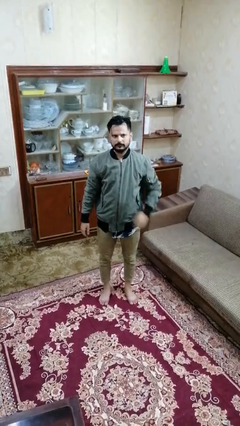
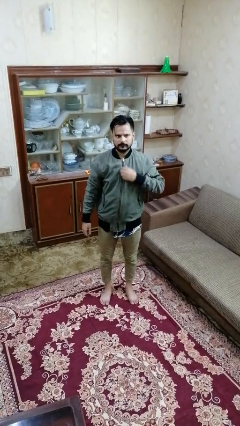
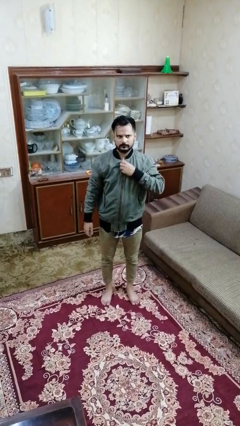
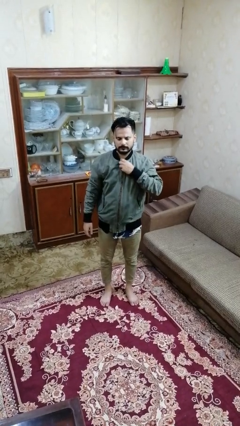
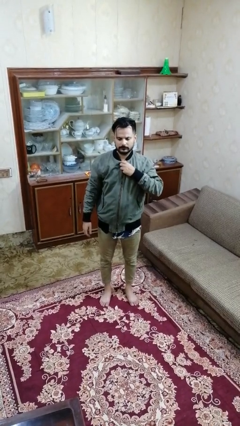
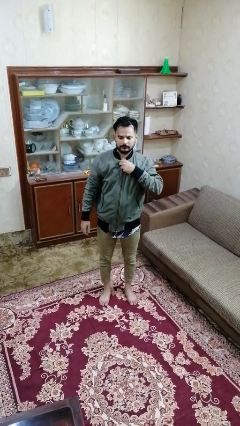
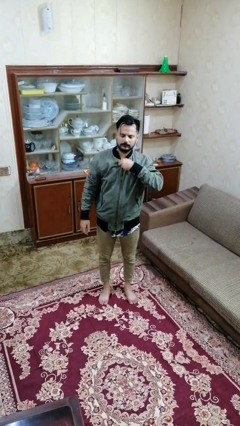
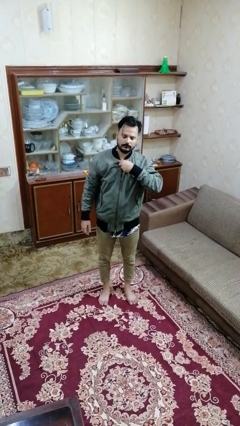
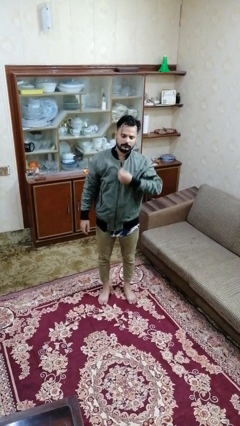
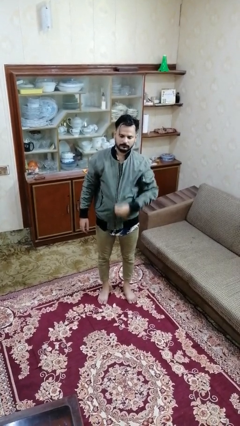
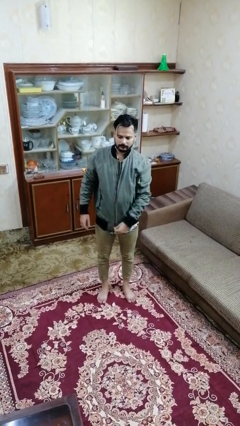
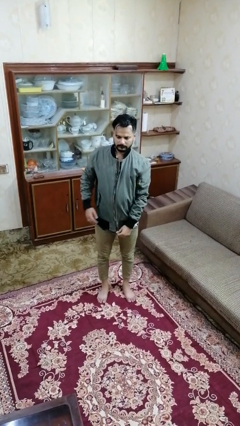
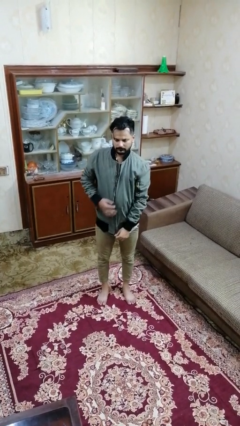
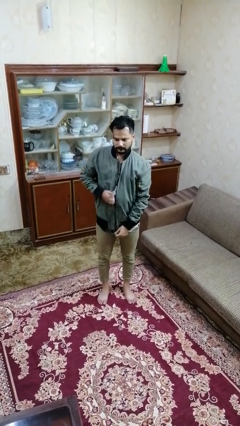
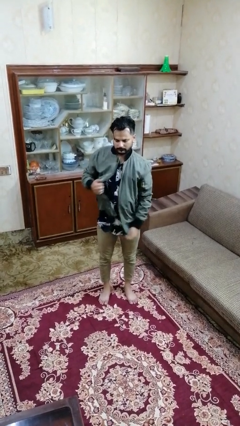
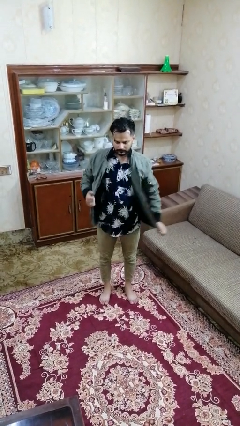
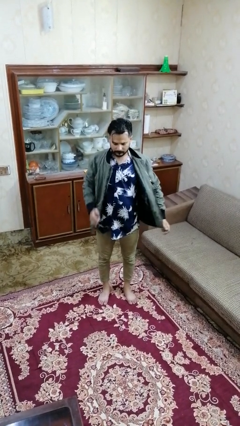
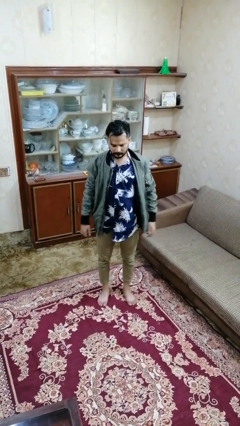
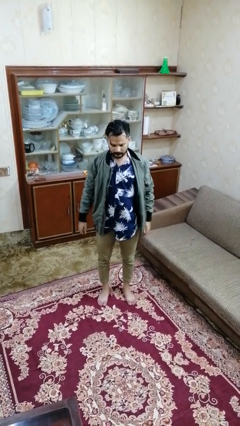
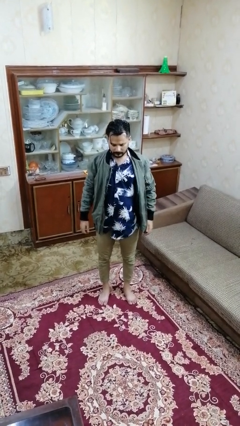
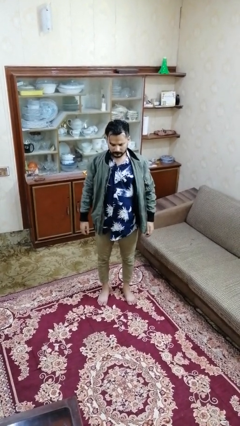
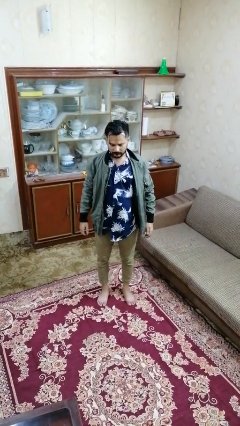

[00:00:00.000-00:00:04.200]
person unzips jacket

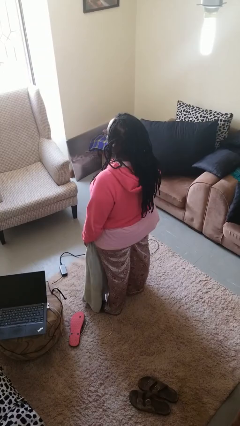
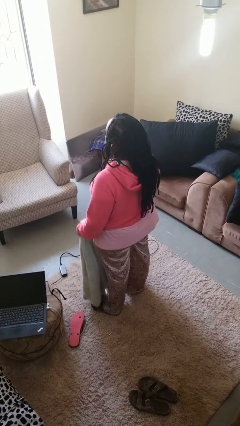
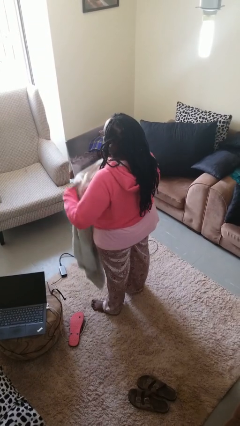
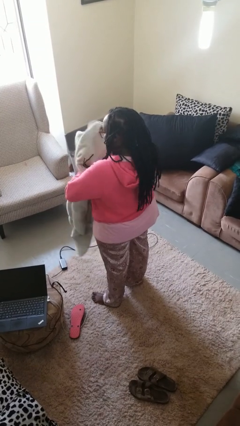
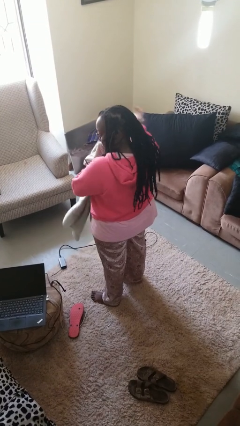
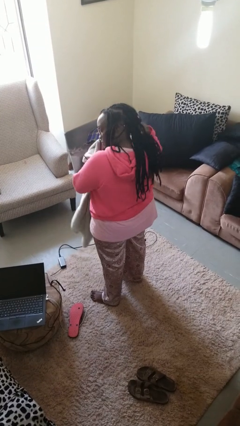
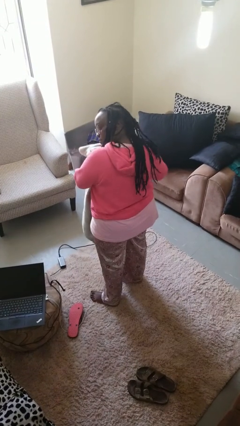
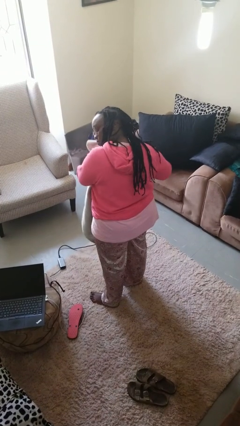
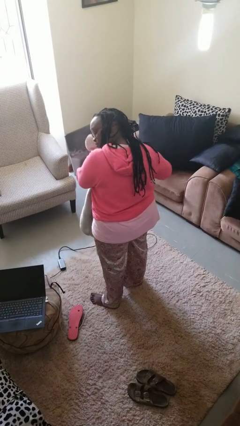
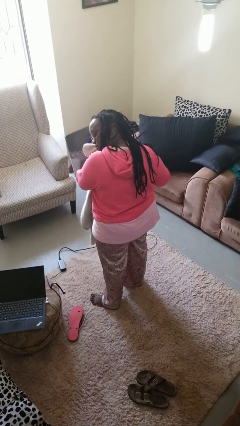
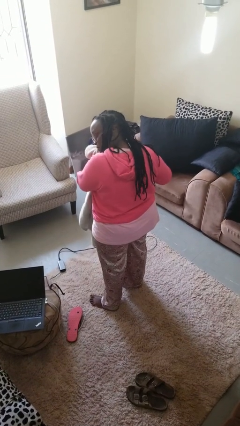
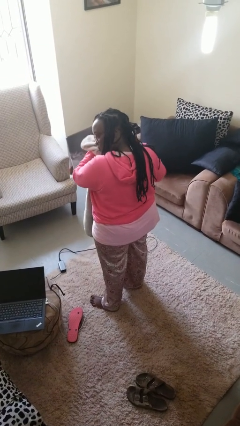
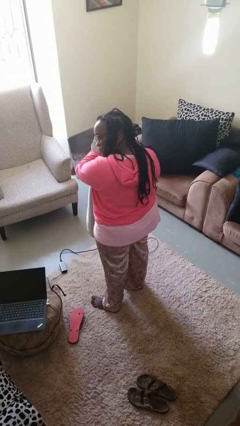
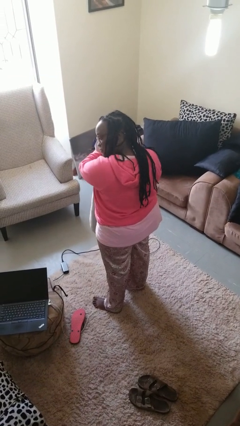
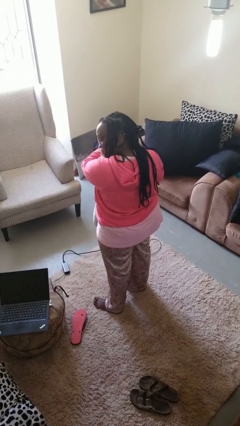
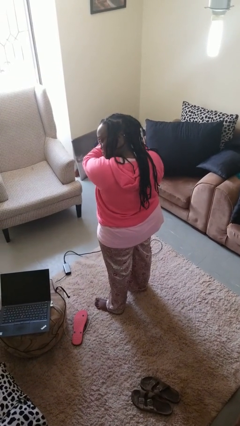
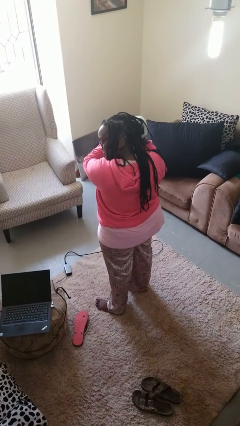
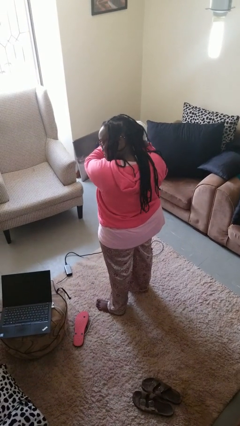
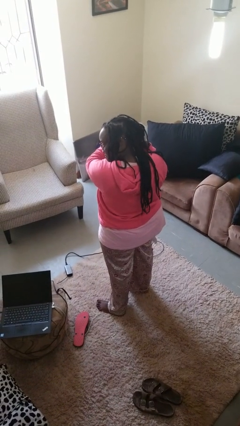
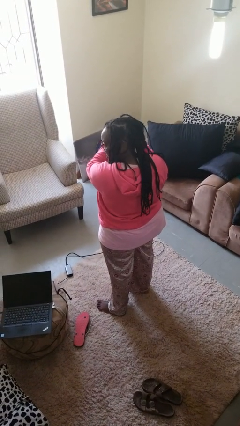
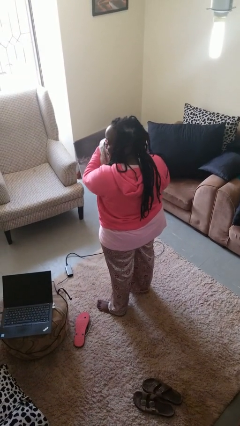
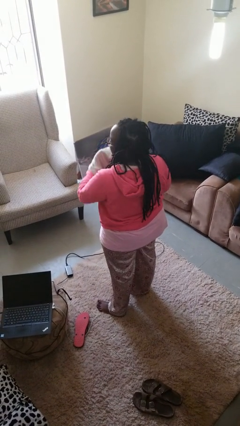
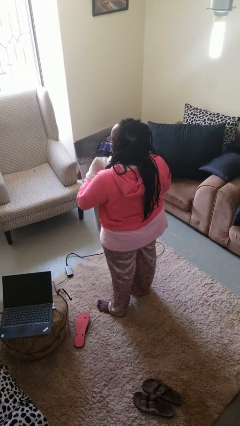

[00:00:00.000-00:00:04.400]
person dries hair with towel

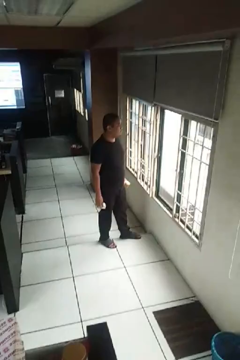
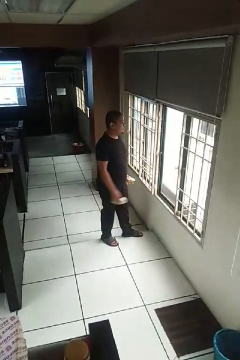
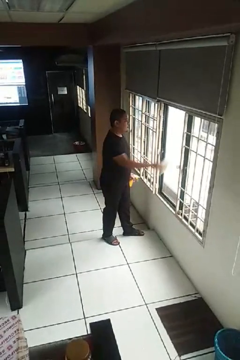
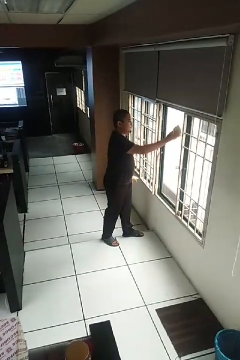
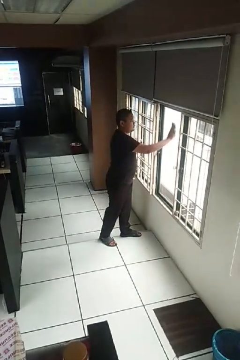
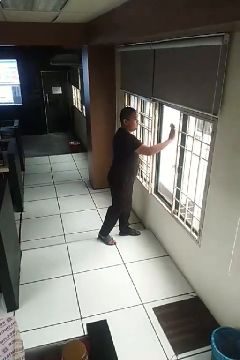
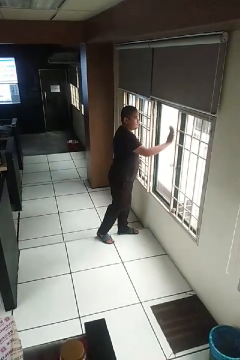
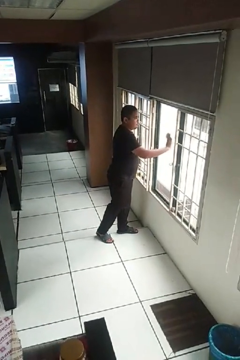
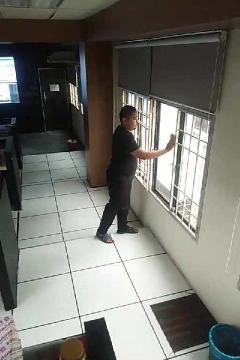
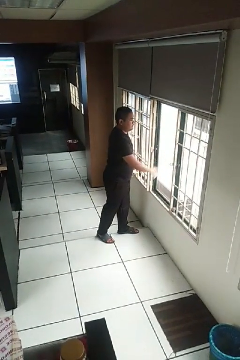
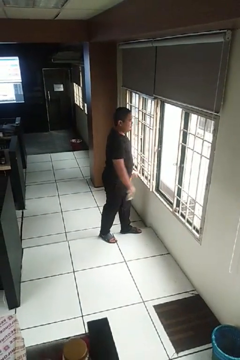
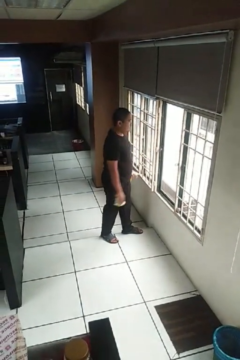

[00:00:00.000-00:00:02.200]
person washes window

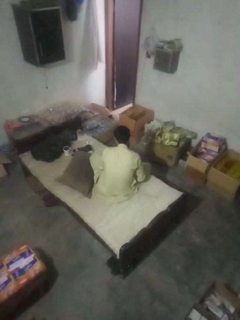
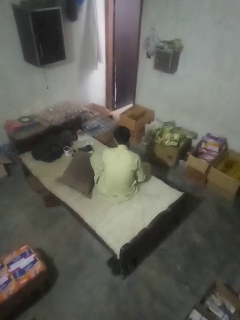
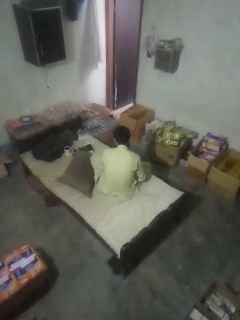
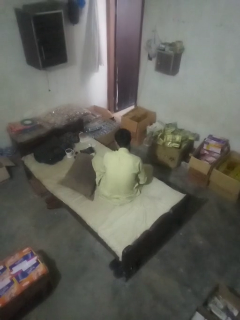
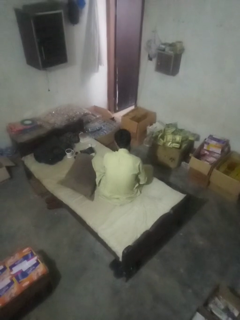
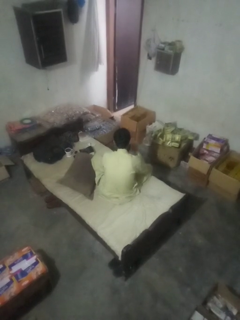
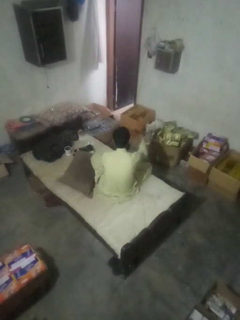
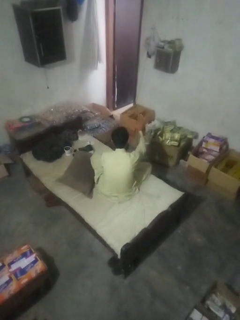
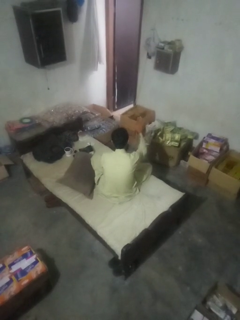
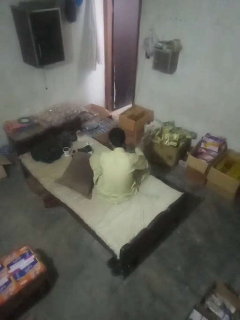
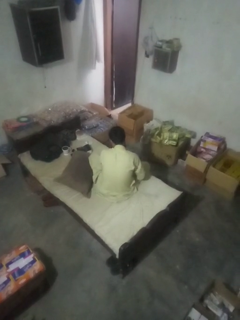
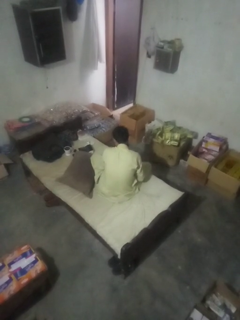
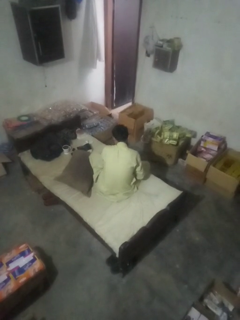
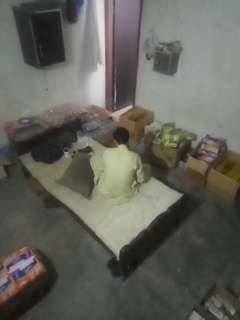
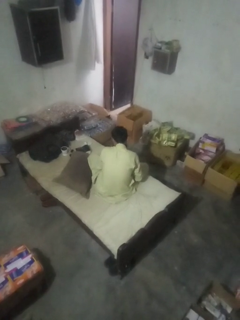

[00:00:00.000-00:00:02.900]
person gestures stop

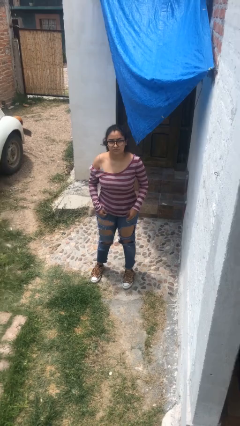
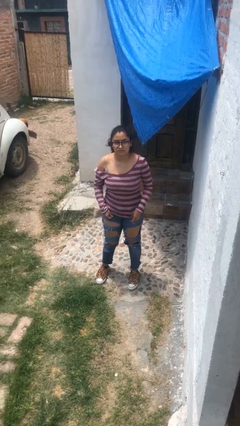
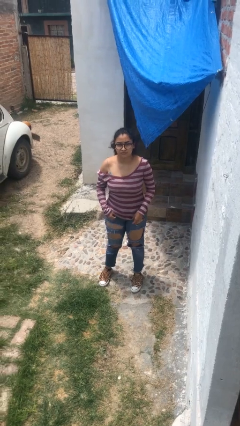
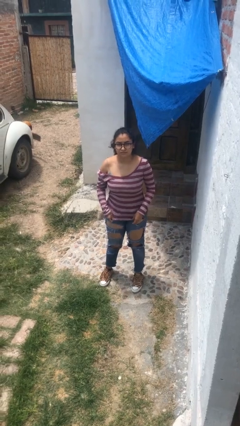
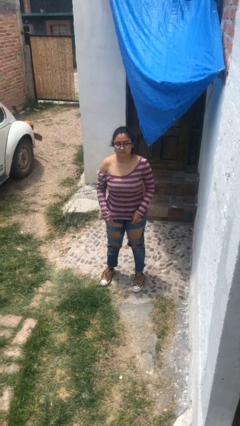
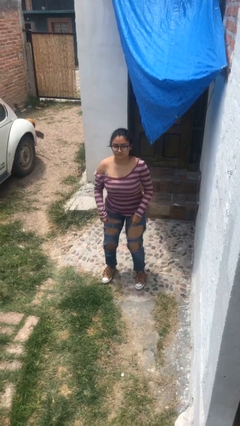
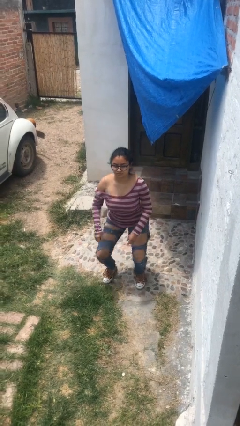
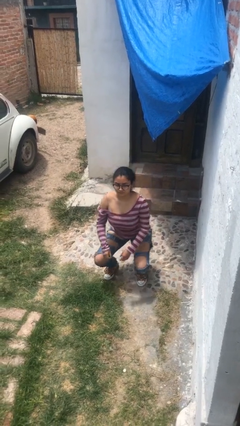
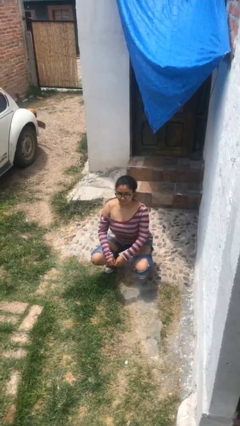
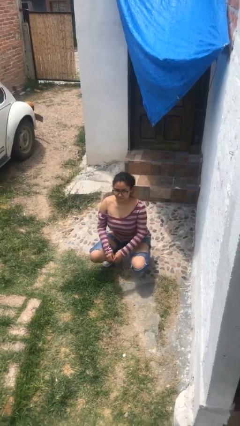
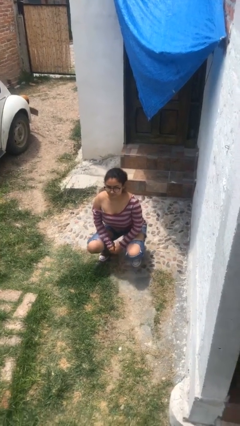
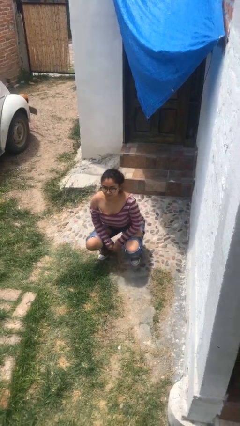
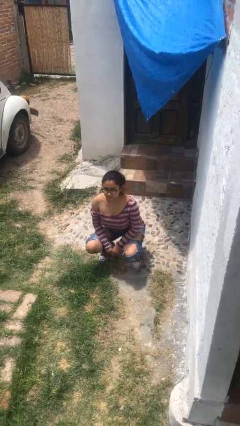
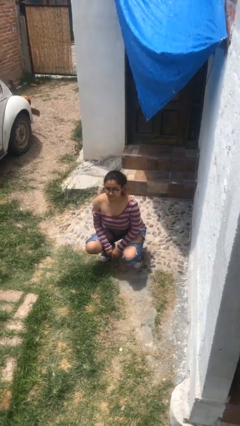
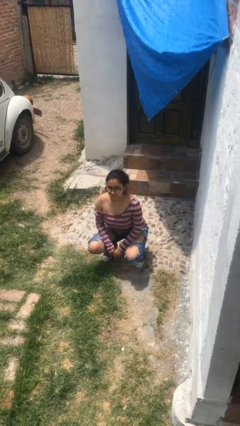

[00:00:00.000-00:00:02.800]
person squats

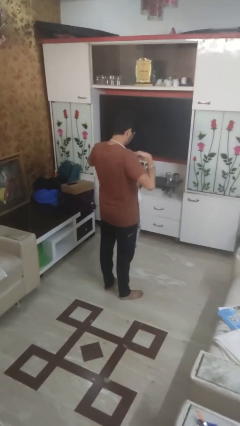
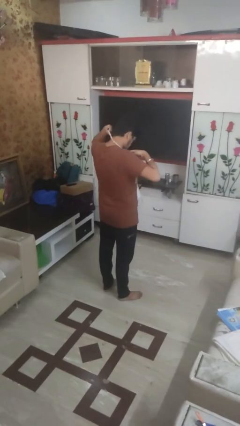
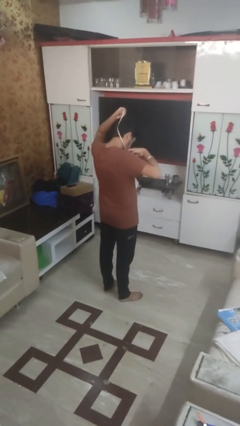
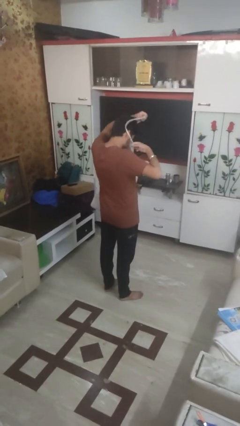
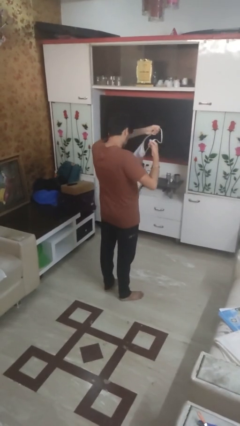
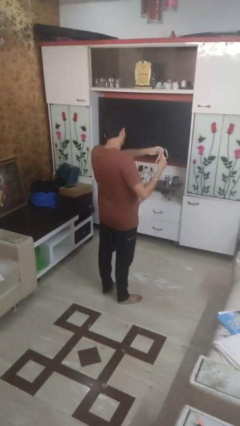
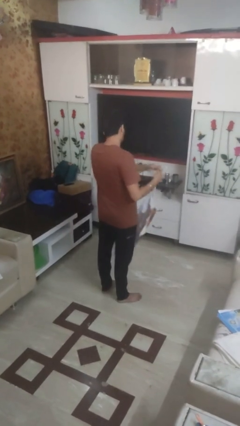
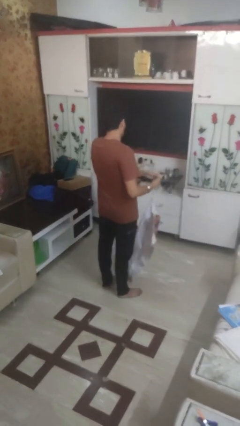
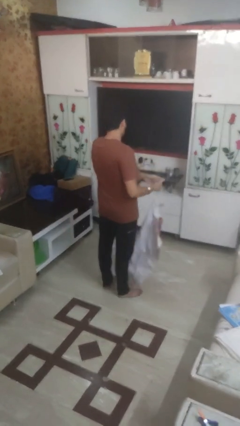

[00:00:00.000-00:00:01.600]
person takes off apron

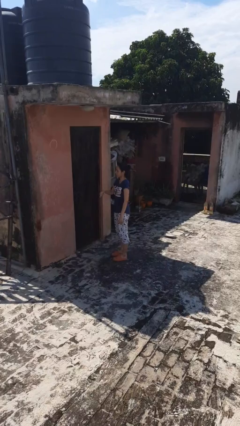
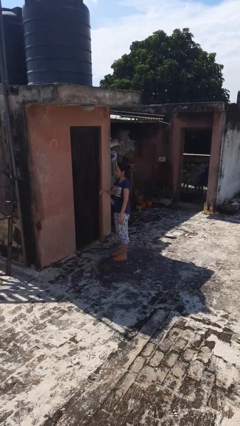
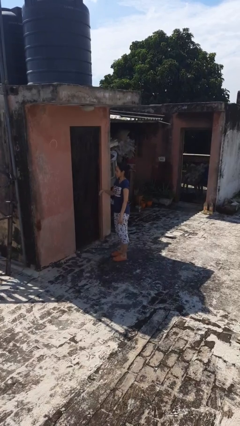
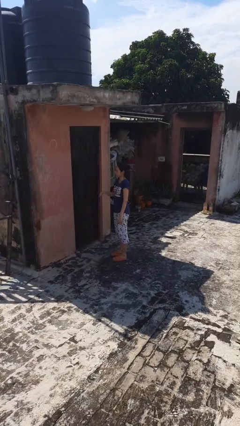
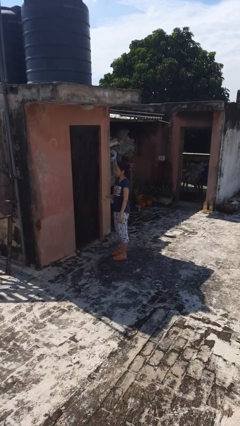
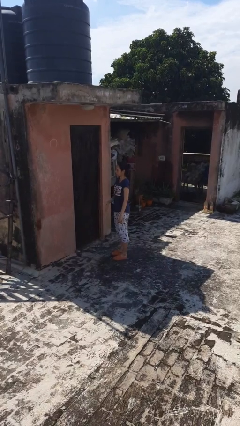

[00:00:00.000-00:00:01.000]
person gestures swipe down
